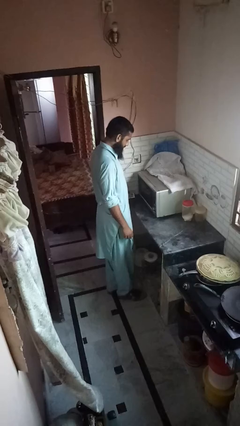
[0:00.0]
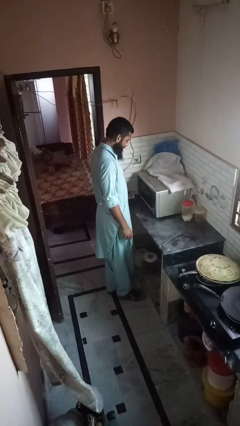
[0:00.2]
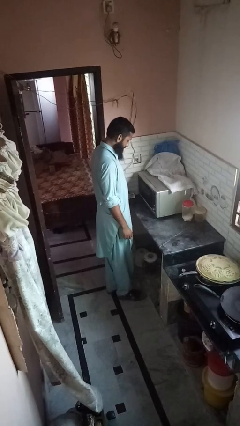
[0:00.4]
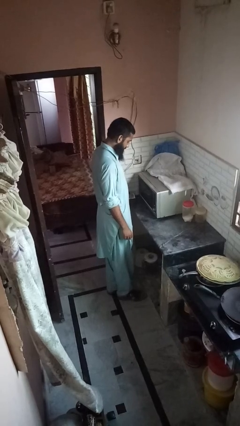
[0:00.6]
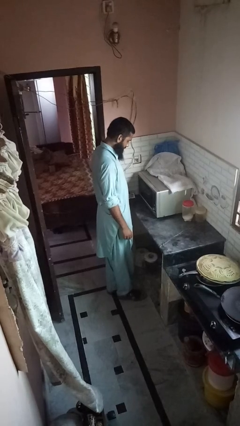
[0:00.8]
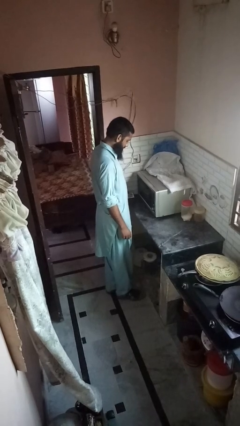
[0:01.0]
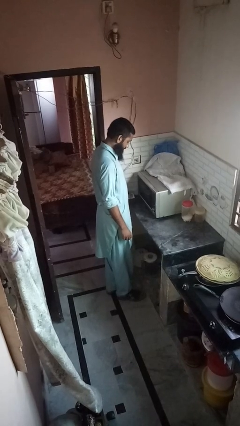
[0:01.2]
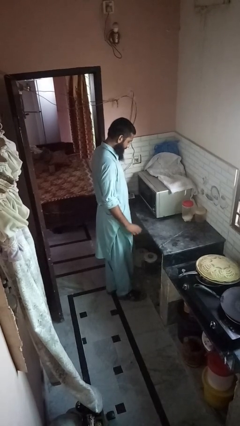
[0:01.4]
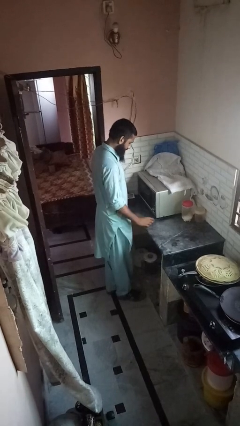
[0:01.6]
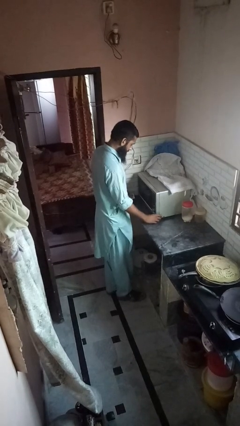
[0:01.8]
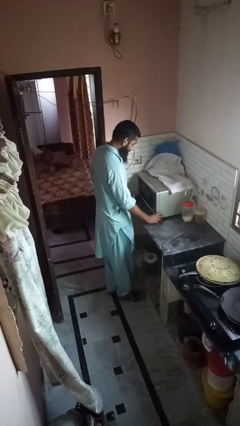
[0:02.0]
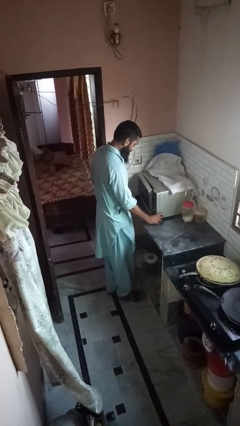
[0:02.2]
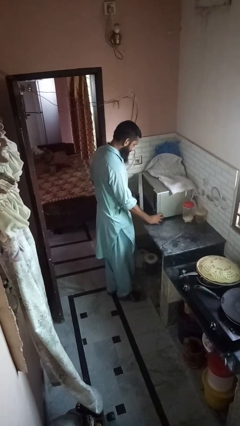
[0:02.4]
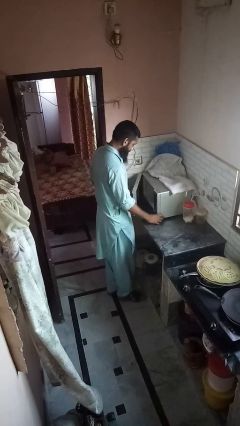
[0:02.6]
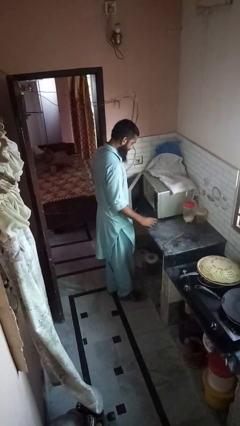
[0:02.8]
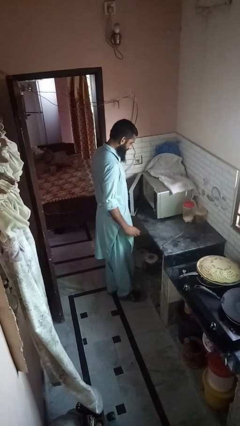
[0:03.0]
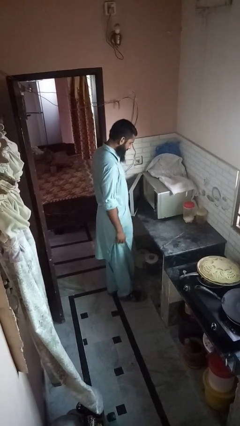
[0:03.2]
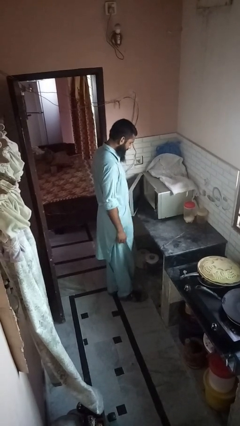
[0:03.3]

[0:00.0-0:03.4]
person opens microwave

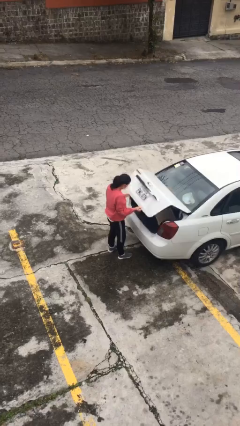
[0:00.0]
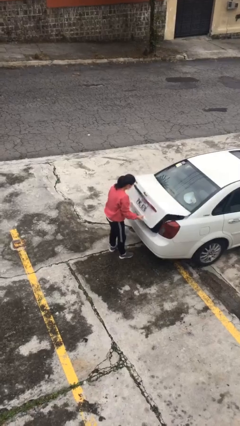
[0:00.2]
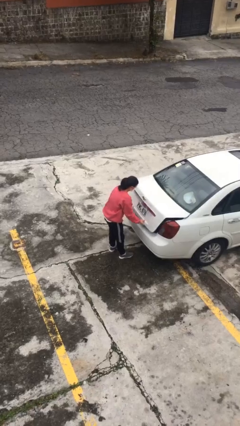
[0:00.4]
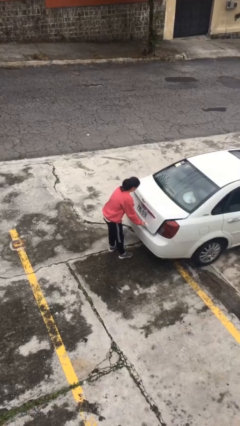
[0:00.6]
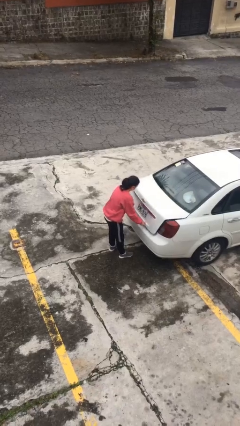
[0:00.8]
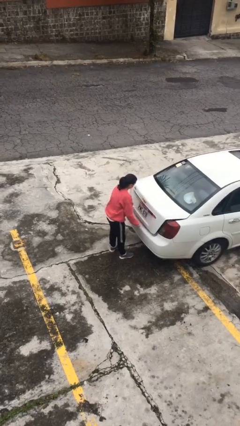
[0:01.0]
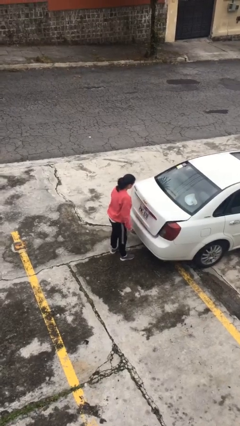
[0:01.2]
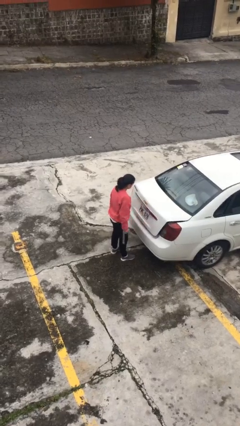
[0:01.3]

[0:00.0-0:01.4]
person closes car trunk

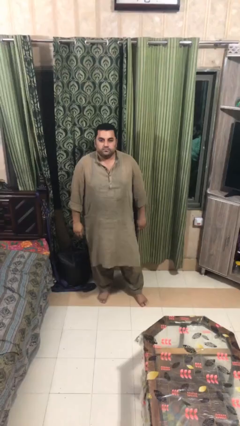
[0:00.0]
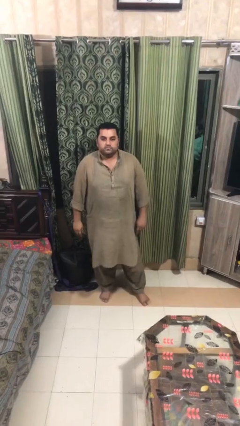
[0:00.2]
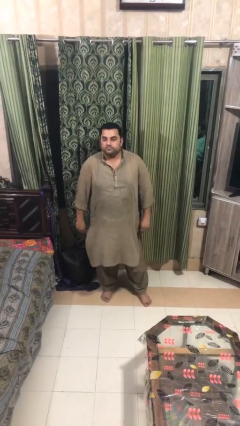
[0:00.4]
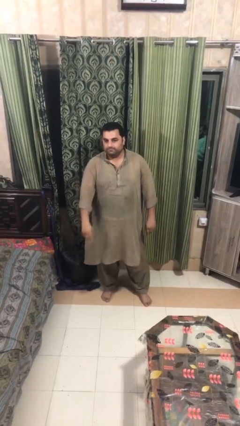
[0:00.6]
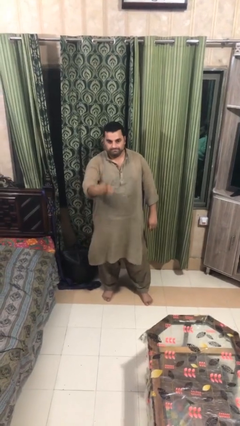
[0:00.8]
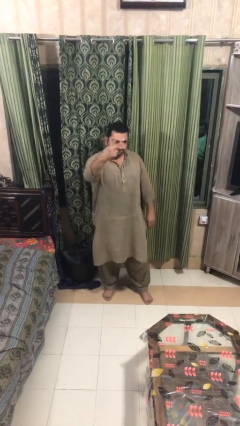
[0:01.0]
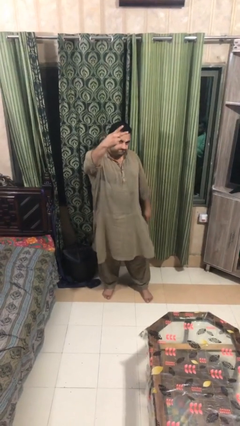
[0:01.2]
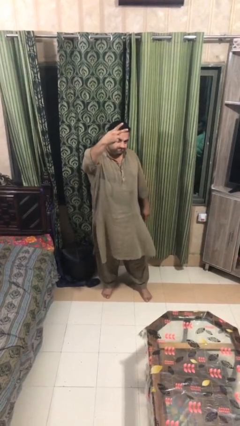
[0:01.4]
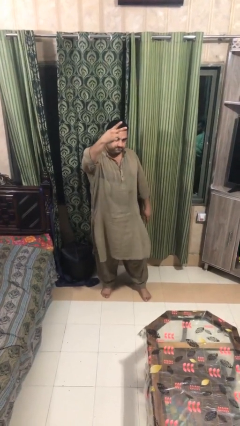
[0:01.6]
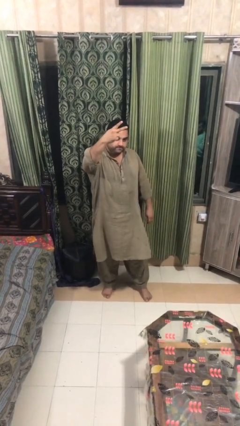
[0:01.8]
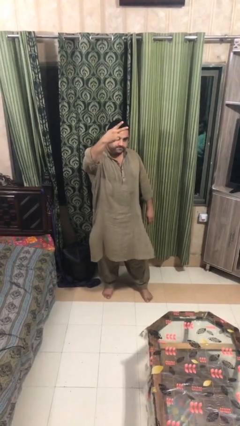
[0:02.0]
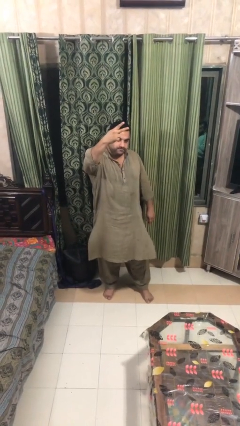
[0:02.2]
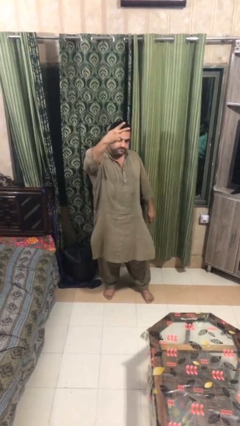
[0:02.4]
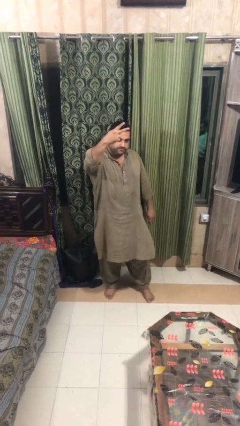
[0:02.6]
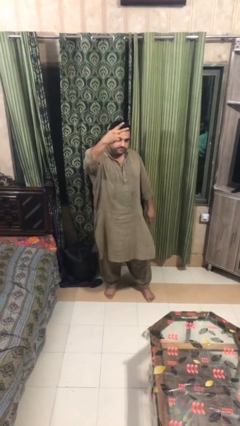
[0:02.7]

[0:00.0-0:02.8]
person gestures peace

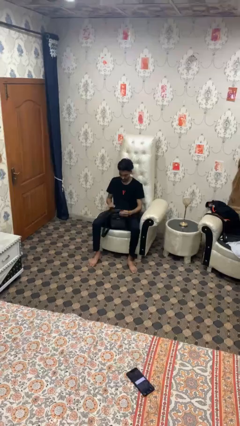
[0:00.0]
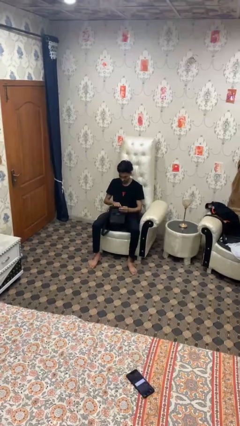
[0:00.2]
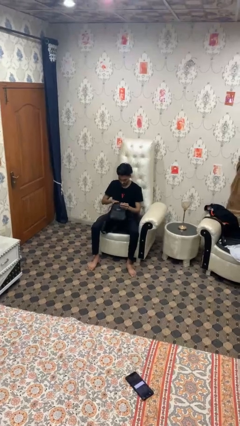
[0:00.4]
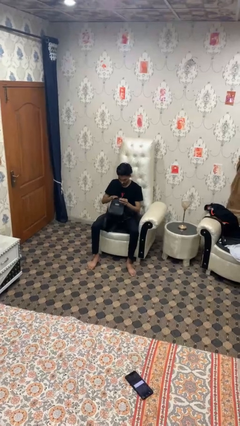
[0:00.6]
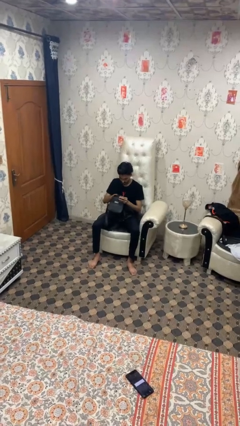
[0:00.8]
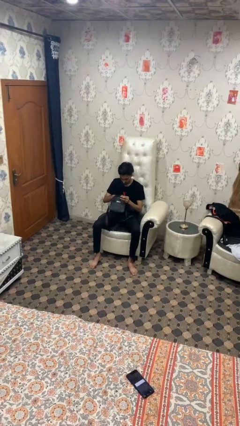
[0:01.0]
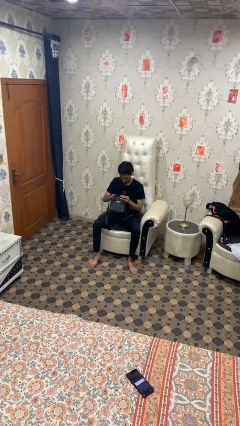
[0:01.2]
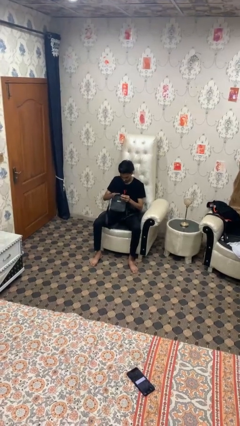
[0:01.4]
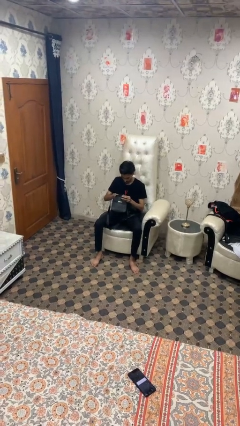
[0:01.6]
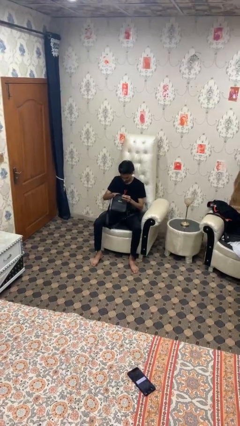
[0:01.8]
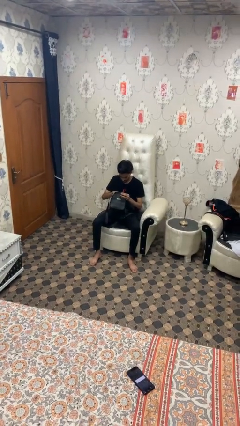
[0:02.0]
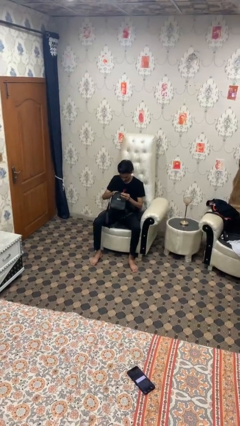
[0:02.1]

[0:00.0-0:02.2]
person searches in bag

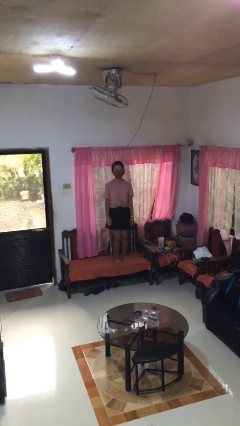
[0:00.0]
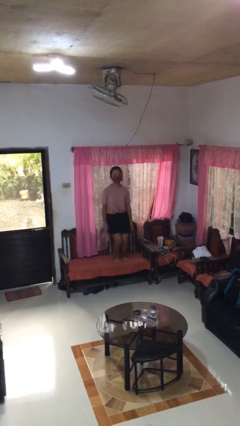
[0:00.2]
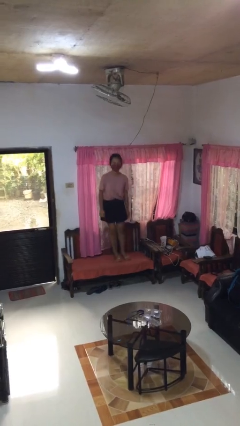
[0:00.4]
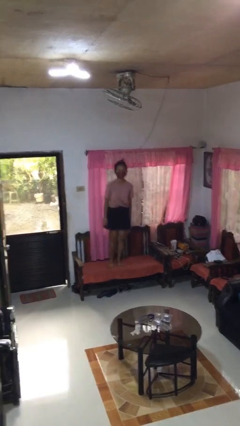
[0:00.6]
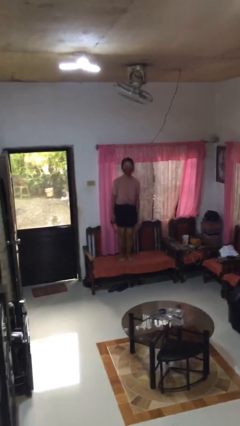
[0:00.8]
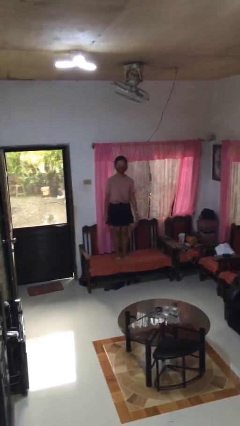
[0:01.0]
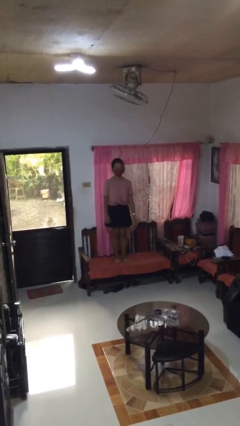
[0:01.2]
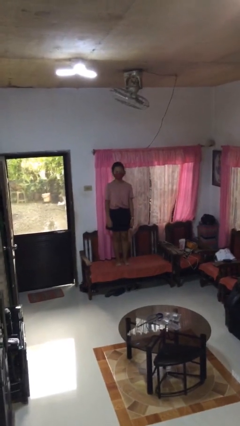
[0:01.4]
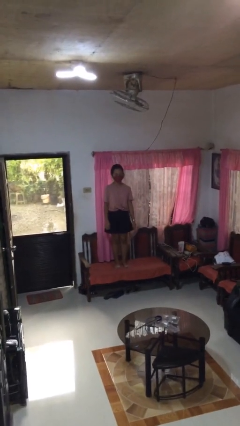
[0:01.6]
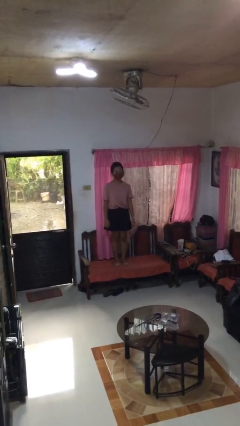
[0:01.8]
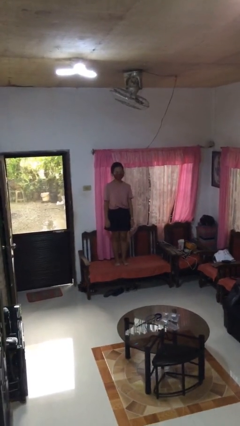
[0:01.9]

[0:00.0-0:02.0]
person jumps on couch

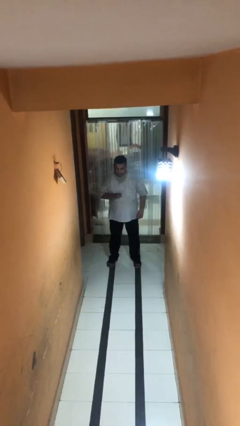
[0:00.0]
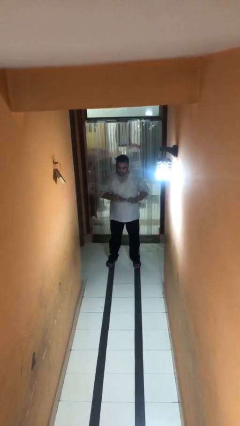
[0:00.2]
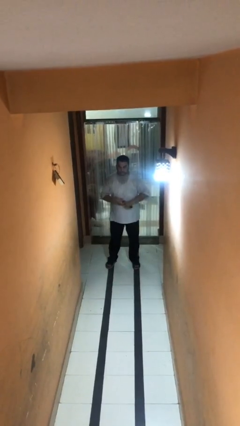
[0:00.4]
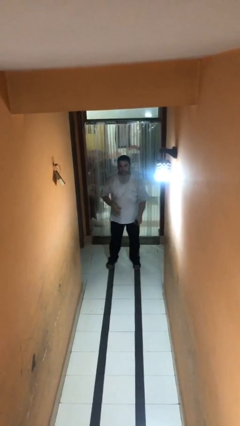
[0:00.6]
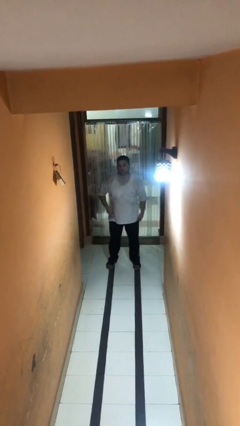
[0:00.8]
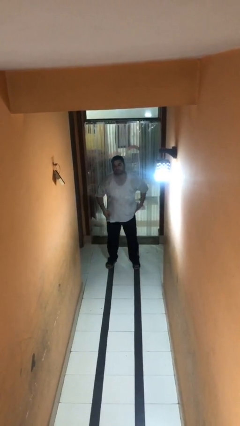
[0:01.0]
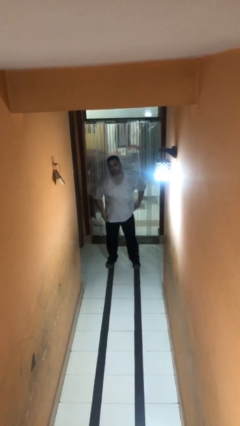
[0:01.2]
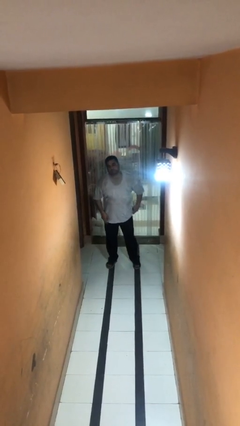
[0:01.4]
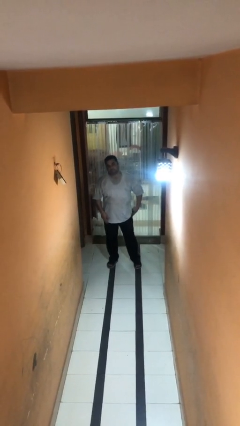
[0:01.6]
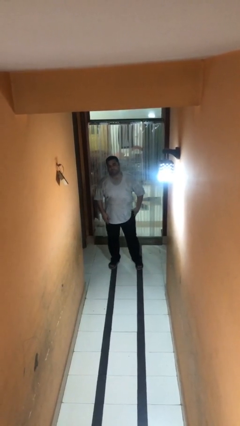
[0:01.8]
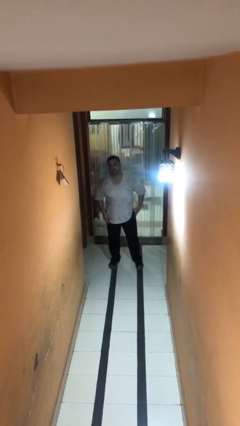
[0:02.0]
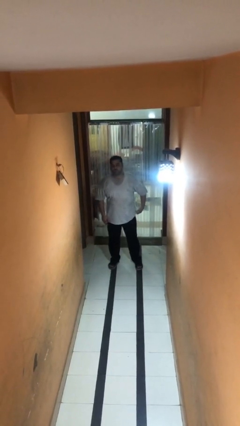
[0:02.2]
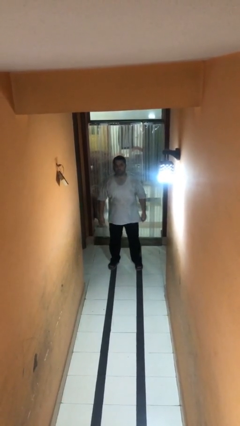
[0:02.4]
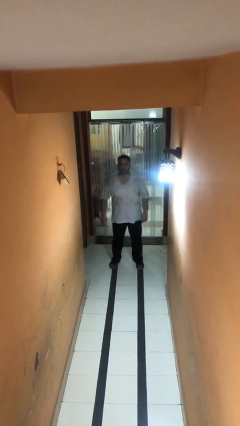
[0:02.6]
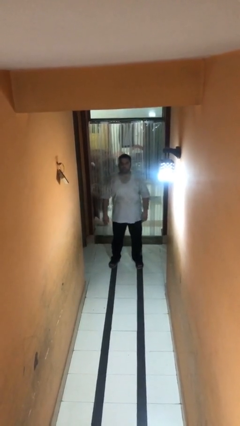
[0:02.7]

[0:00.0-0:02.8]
person puts phone into pocket

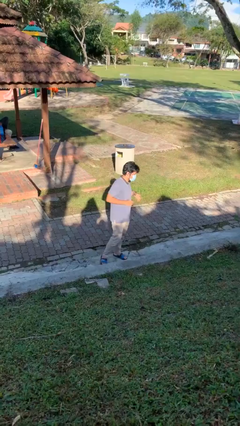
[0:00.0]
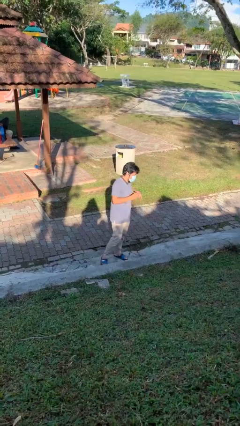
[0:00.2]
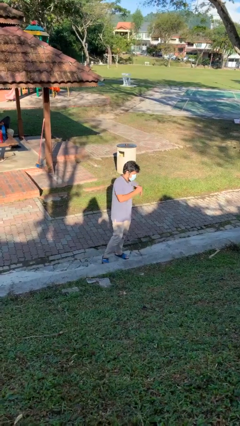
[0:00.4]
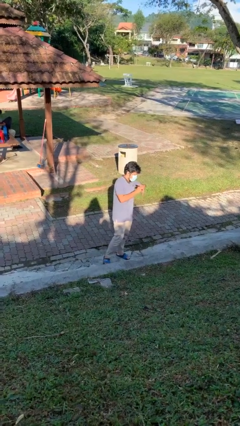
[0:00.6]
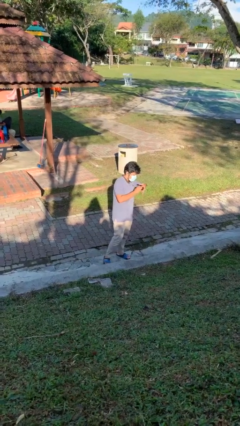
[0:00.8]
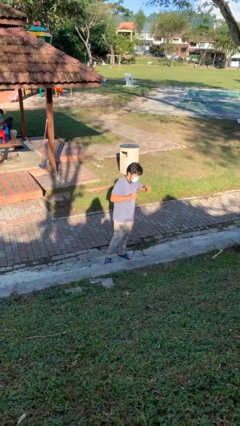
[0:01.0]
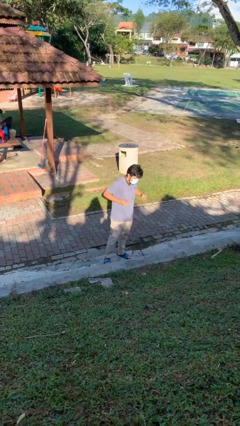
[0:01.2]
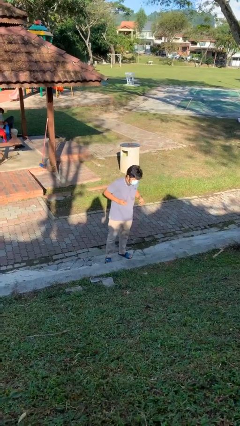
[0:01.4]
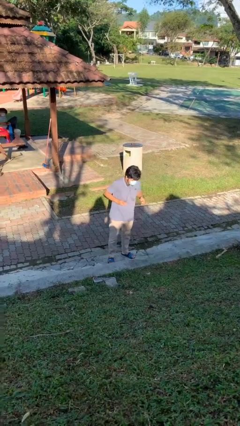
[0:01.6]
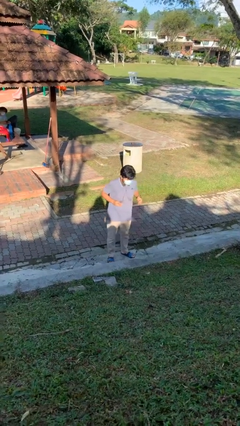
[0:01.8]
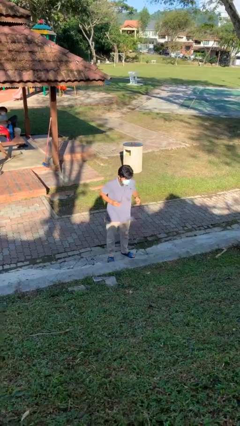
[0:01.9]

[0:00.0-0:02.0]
person takes off ring

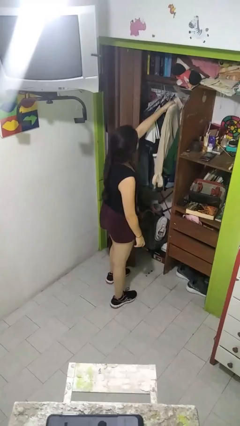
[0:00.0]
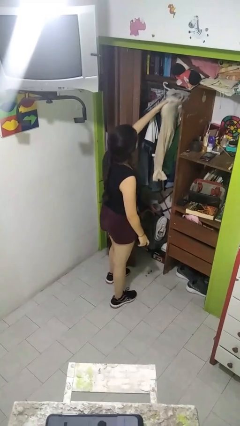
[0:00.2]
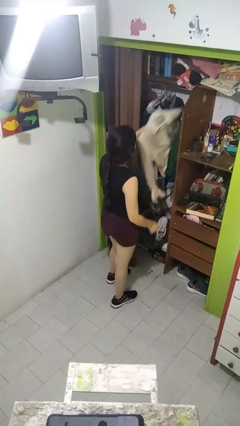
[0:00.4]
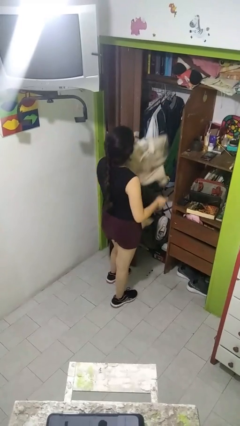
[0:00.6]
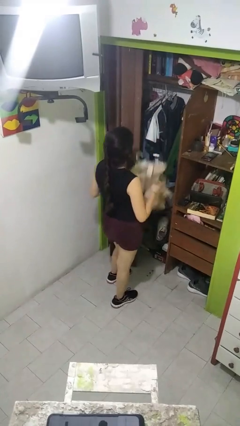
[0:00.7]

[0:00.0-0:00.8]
person takes clothes from closet
